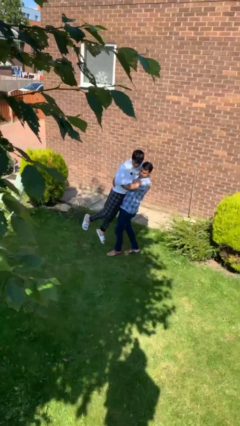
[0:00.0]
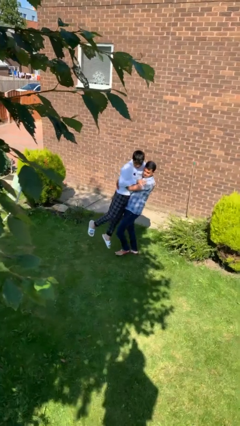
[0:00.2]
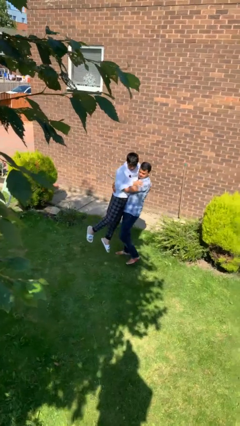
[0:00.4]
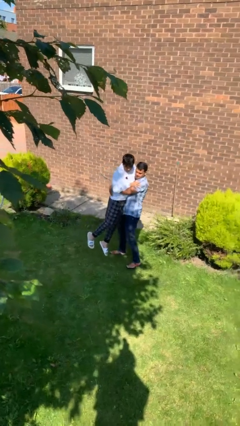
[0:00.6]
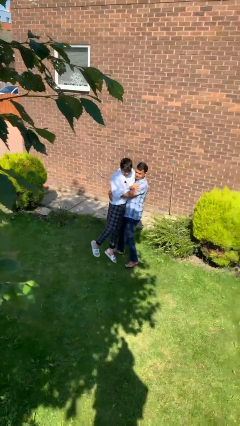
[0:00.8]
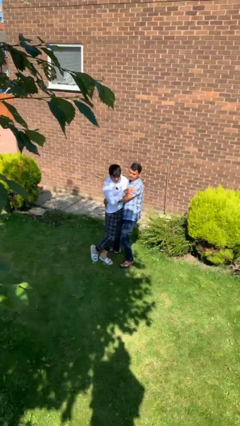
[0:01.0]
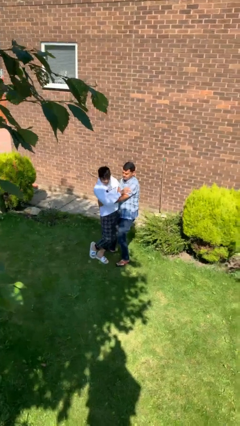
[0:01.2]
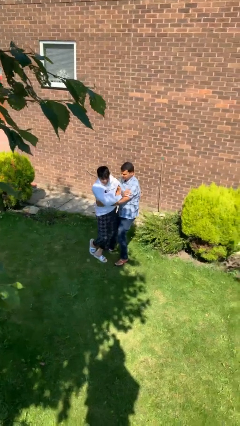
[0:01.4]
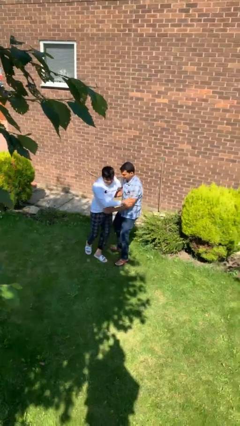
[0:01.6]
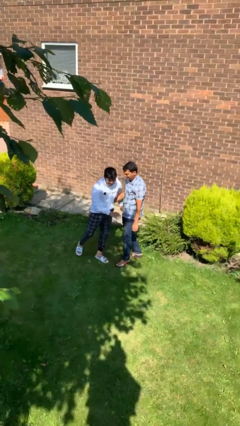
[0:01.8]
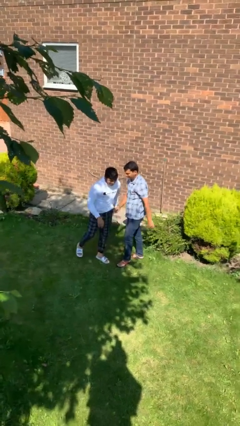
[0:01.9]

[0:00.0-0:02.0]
person puts down person

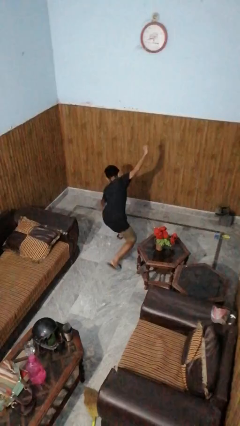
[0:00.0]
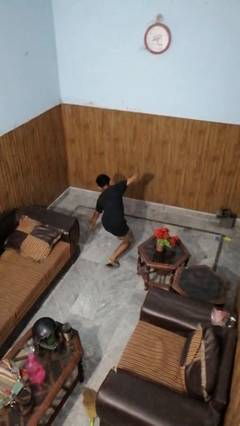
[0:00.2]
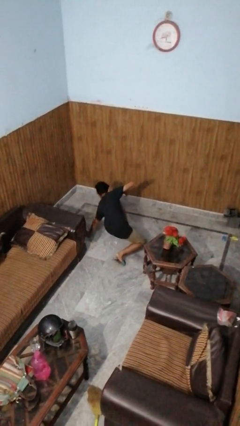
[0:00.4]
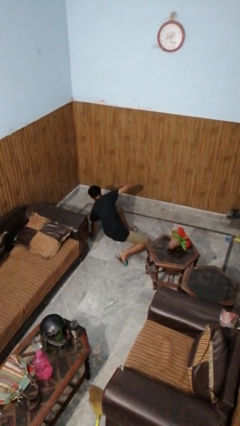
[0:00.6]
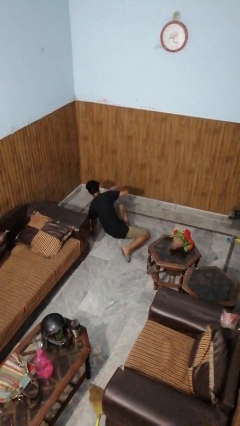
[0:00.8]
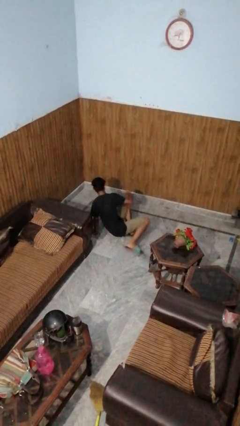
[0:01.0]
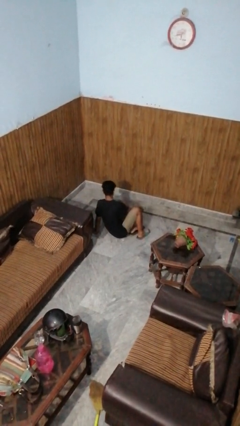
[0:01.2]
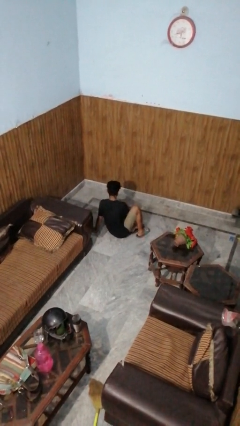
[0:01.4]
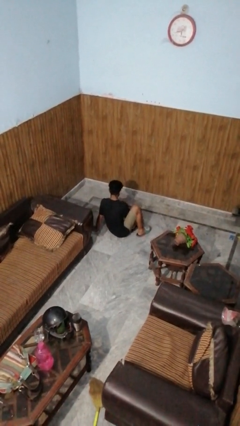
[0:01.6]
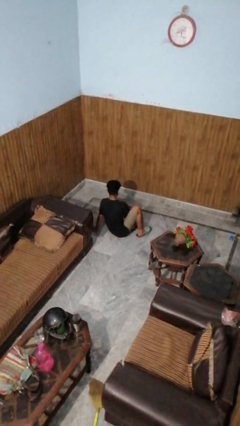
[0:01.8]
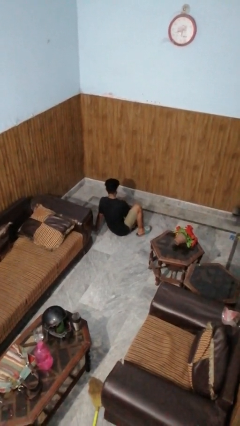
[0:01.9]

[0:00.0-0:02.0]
person lies down on floor

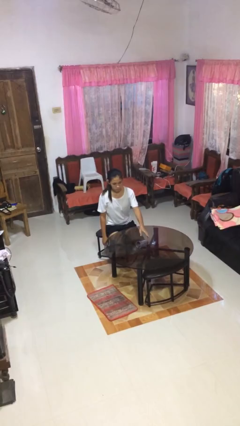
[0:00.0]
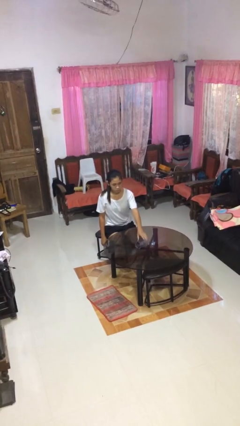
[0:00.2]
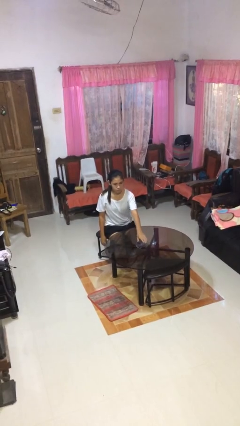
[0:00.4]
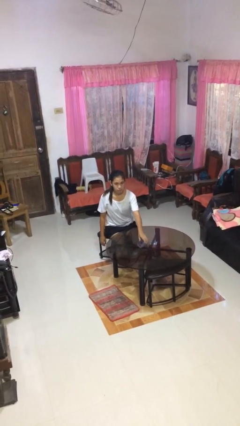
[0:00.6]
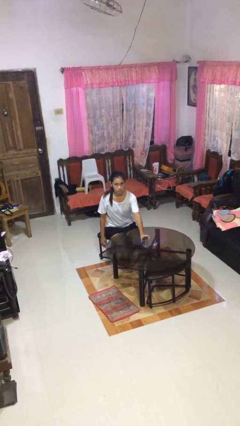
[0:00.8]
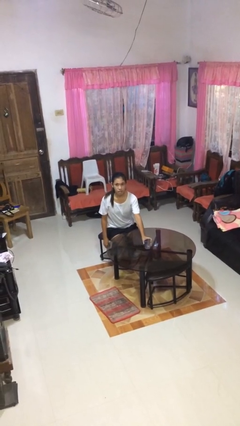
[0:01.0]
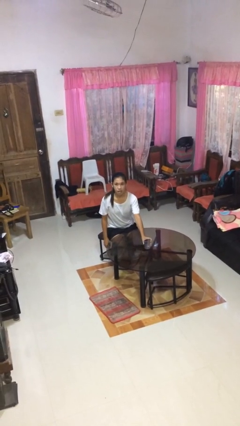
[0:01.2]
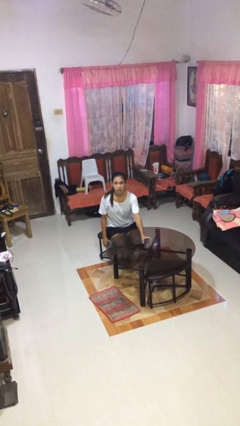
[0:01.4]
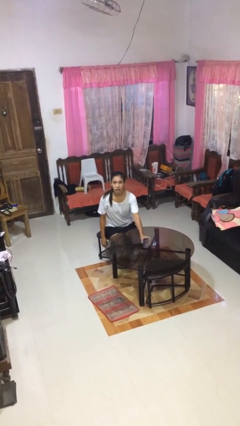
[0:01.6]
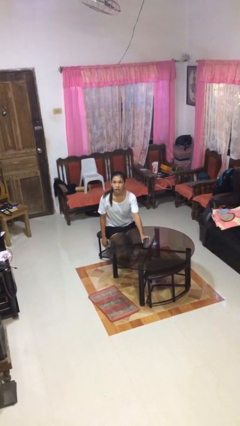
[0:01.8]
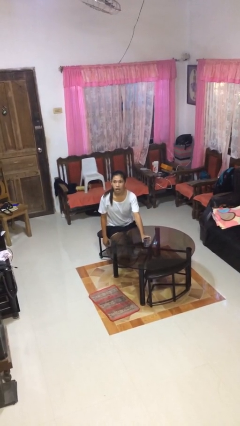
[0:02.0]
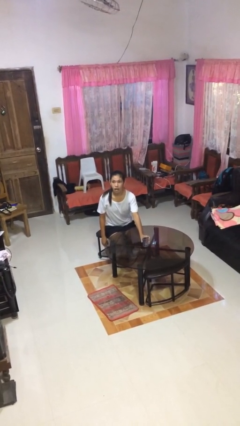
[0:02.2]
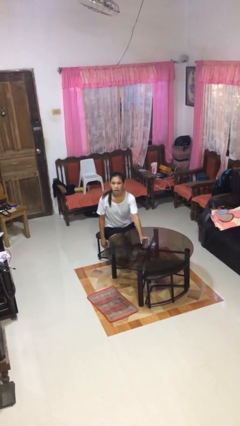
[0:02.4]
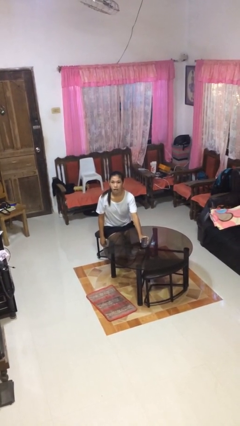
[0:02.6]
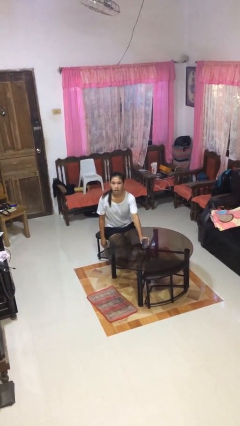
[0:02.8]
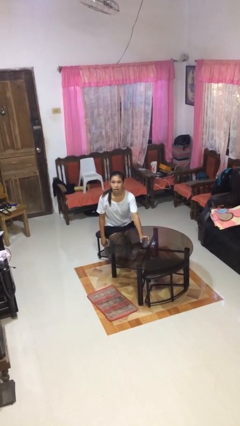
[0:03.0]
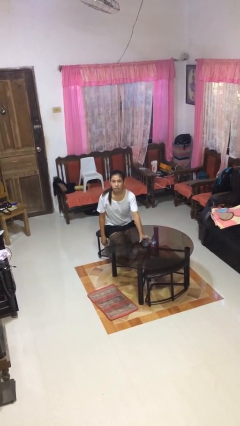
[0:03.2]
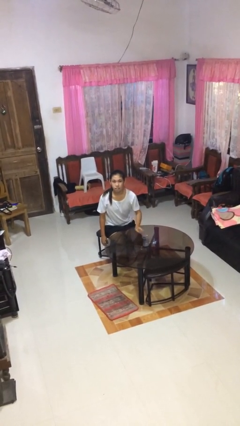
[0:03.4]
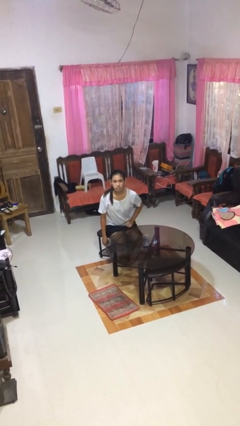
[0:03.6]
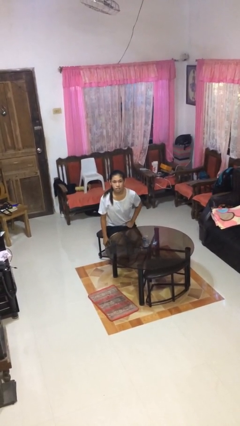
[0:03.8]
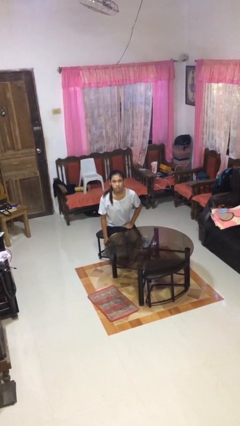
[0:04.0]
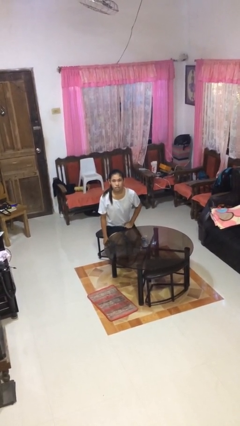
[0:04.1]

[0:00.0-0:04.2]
person sets upright glass

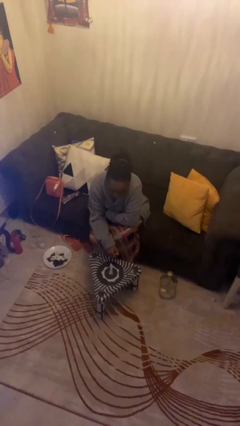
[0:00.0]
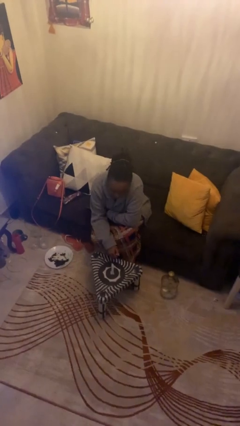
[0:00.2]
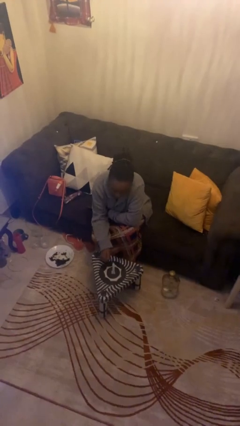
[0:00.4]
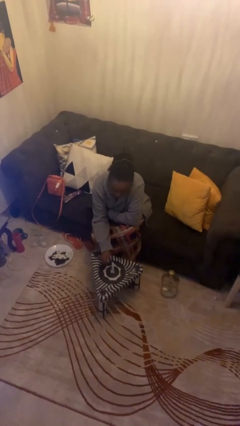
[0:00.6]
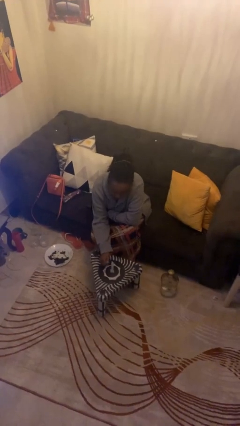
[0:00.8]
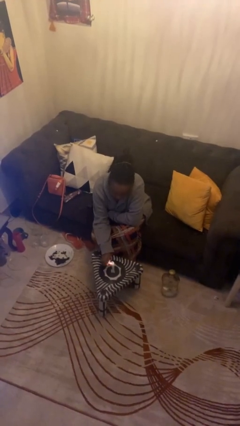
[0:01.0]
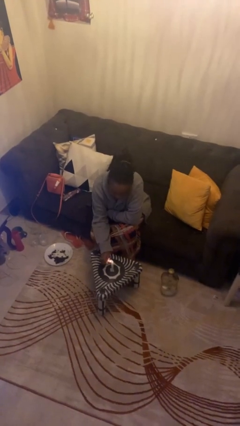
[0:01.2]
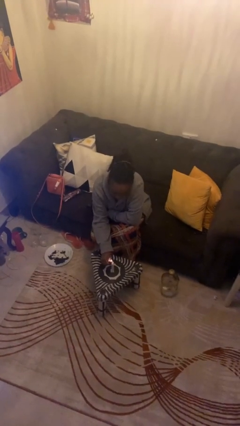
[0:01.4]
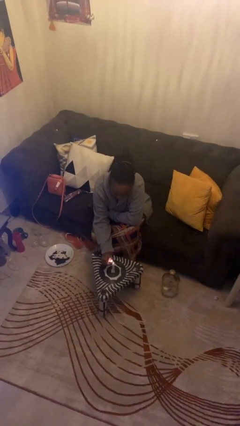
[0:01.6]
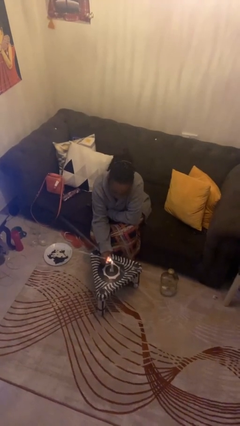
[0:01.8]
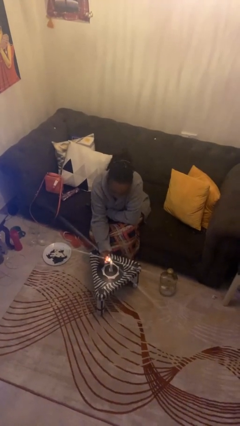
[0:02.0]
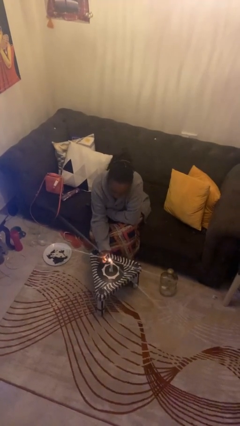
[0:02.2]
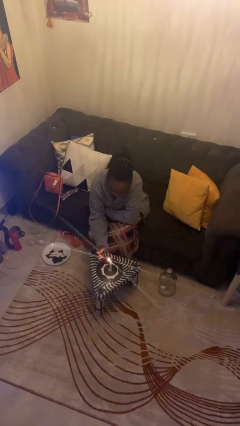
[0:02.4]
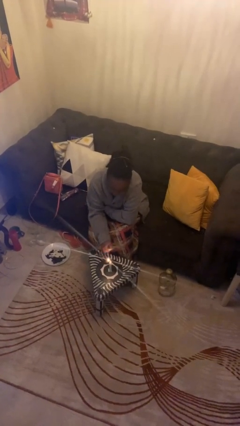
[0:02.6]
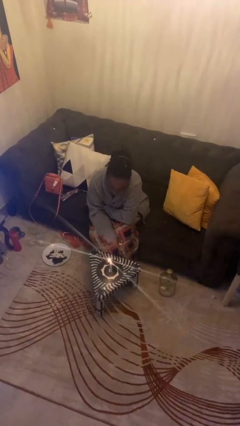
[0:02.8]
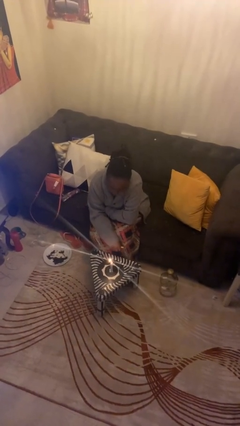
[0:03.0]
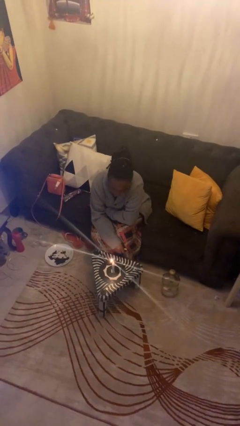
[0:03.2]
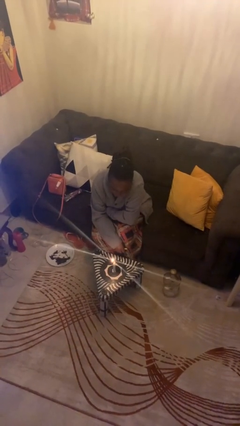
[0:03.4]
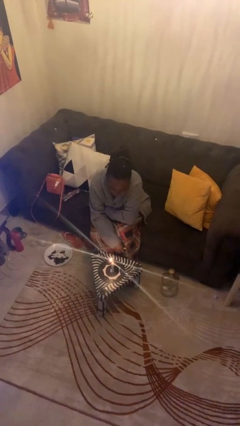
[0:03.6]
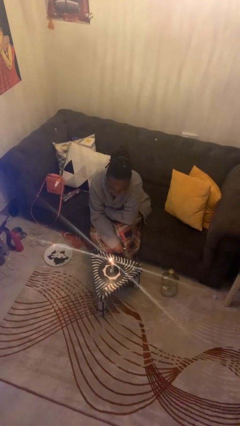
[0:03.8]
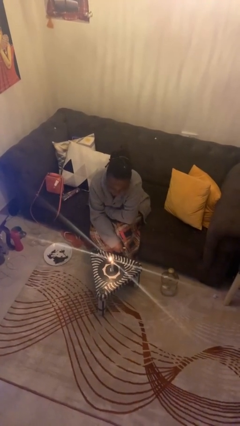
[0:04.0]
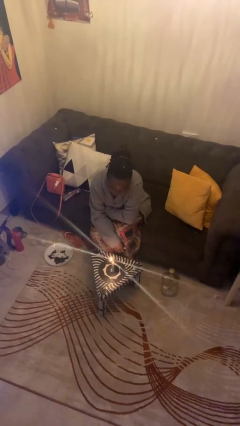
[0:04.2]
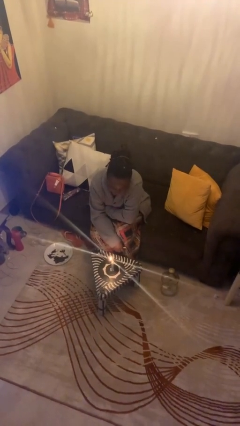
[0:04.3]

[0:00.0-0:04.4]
person lights candle

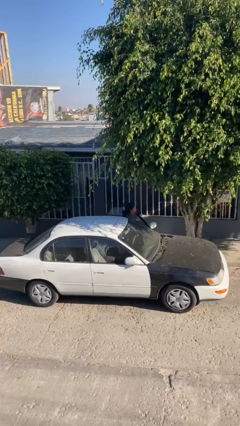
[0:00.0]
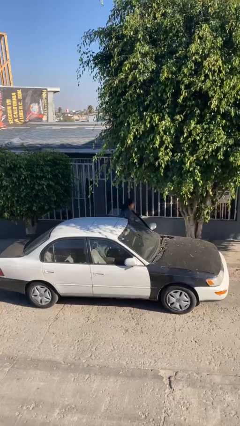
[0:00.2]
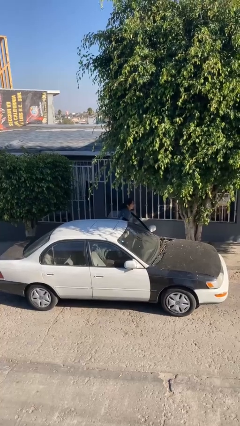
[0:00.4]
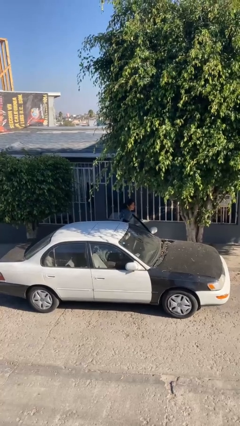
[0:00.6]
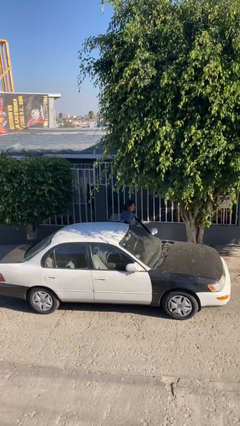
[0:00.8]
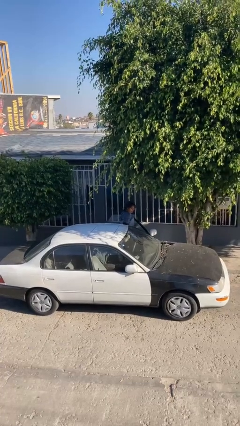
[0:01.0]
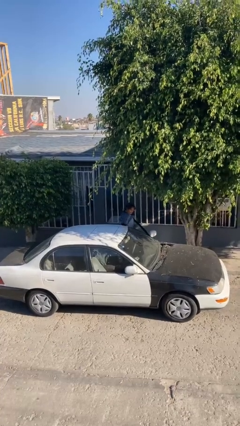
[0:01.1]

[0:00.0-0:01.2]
person exits car

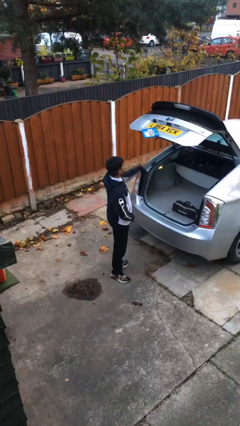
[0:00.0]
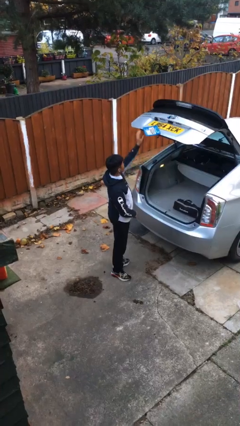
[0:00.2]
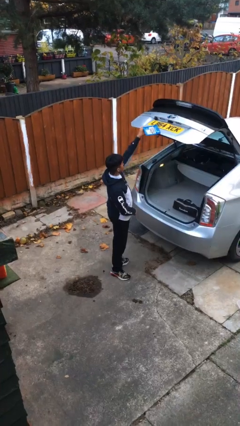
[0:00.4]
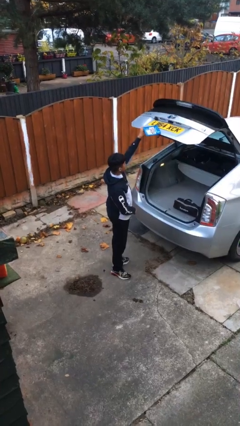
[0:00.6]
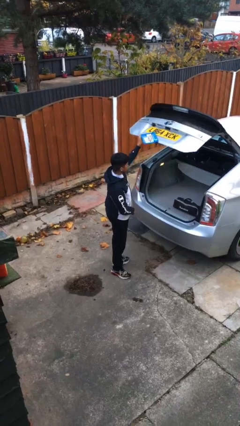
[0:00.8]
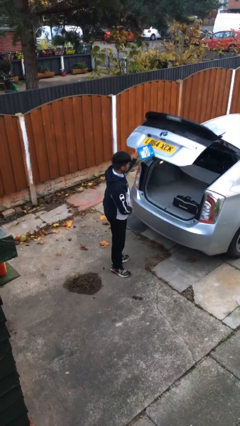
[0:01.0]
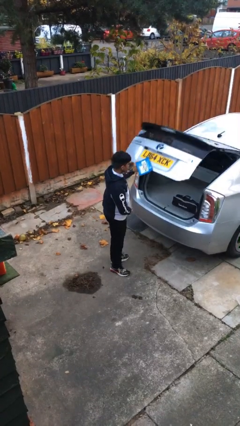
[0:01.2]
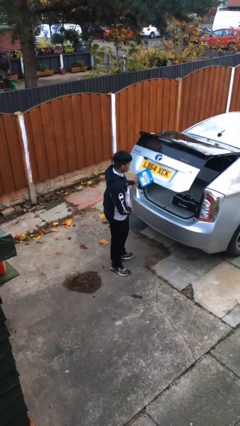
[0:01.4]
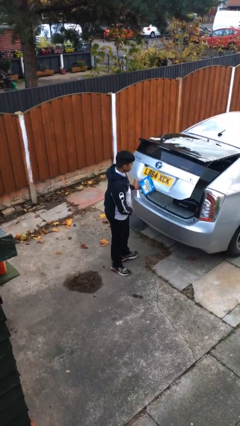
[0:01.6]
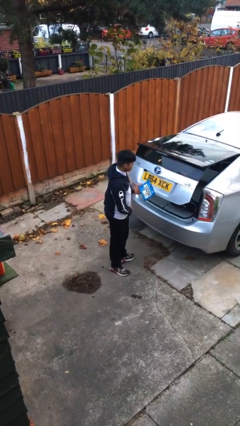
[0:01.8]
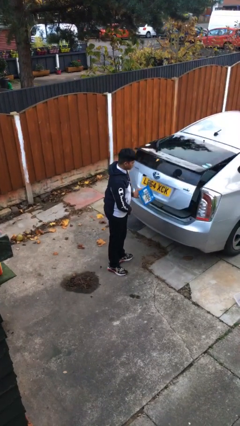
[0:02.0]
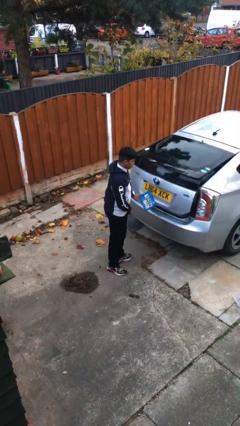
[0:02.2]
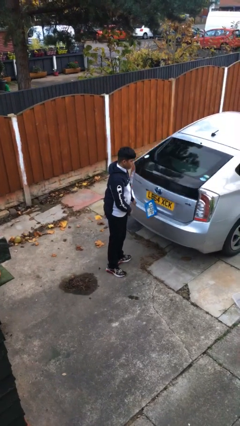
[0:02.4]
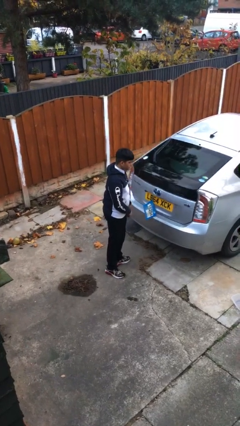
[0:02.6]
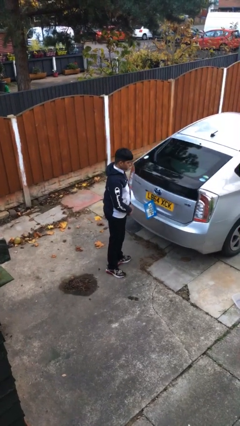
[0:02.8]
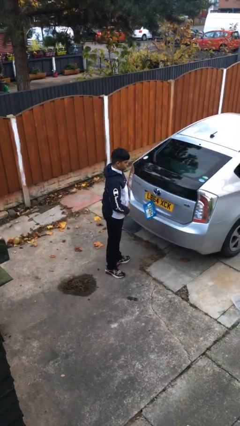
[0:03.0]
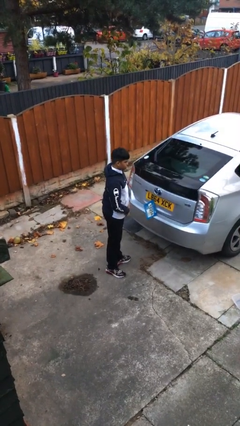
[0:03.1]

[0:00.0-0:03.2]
person closes car trunk

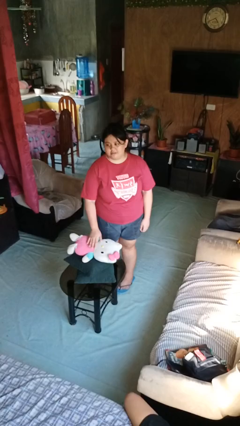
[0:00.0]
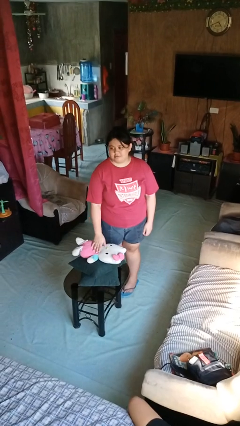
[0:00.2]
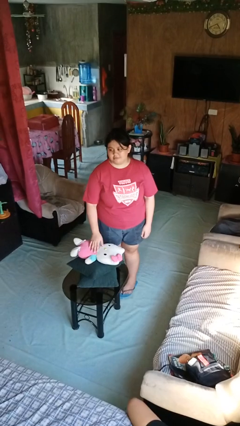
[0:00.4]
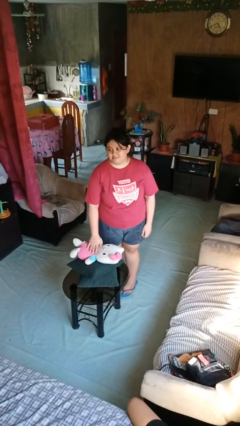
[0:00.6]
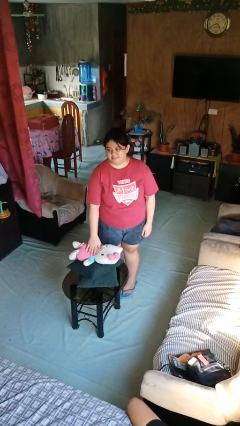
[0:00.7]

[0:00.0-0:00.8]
person taps object with finger
